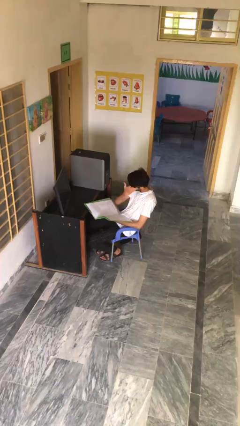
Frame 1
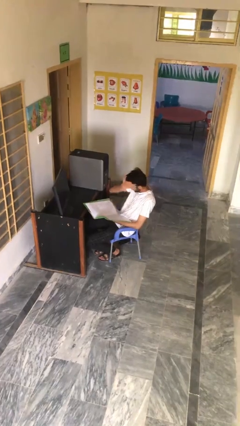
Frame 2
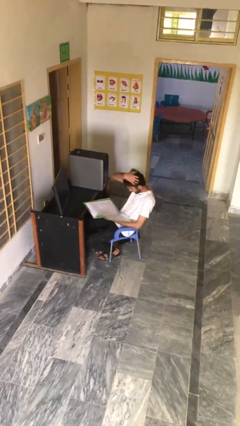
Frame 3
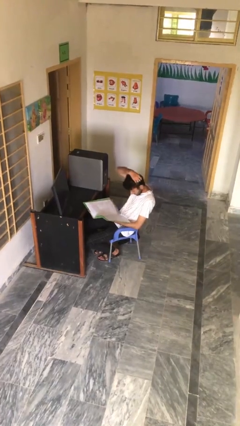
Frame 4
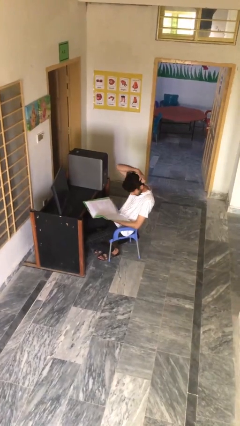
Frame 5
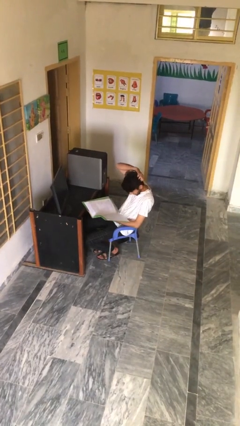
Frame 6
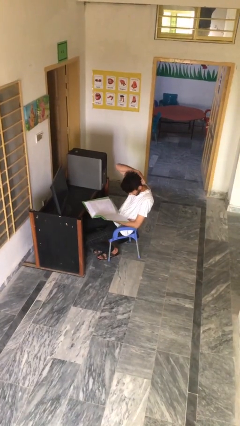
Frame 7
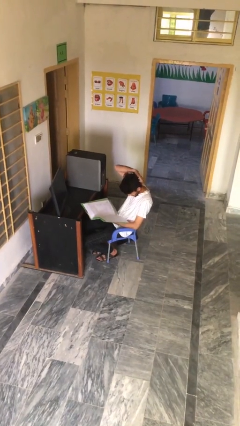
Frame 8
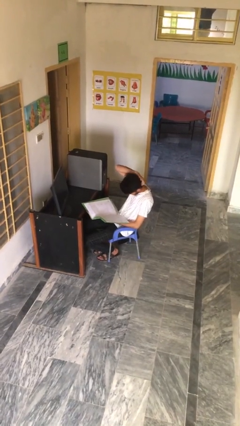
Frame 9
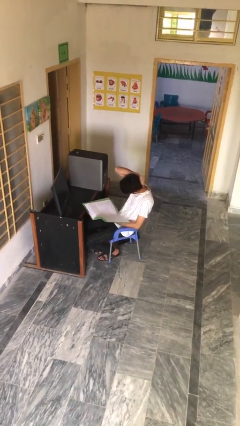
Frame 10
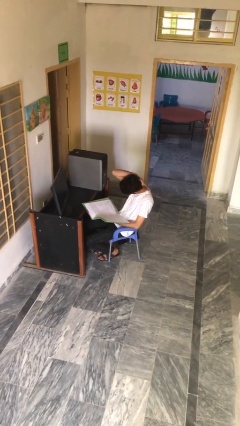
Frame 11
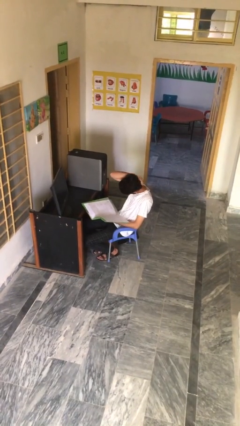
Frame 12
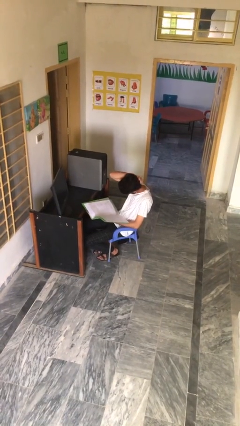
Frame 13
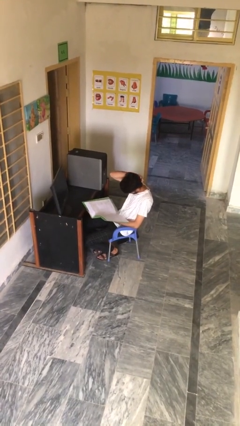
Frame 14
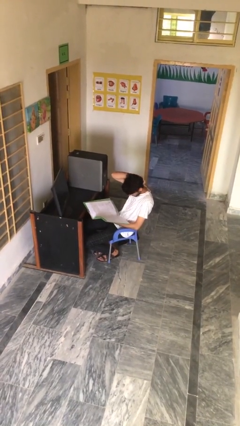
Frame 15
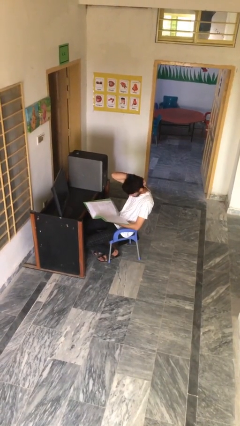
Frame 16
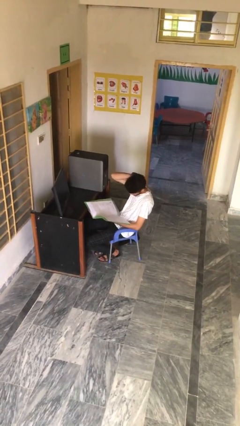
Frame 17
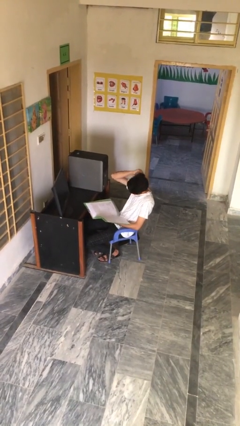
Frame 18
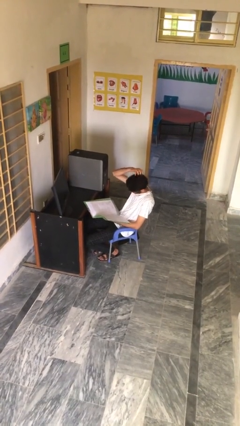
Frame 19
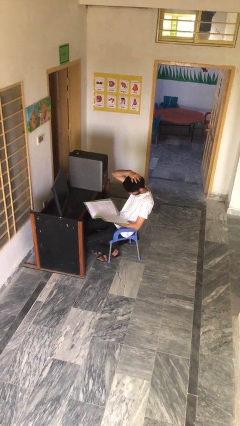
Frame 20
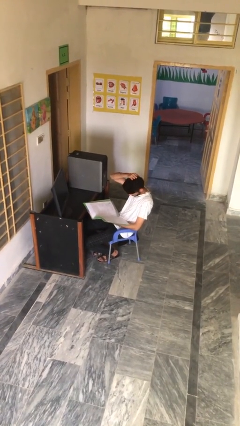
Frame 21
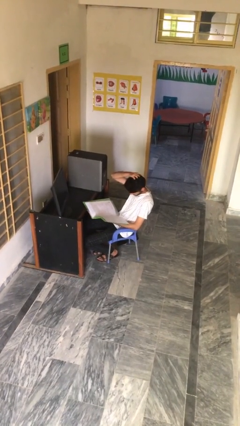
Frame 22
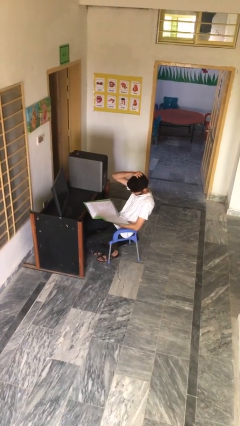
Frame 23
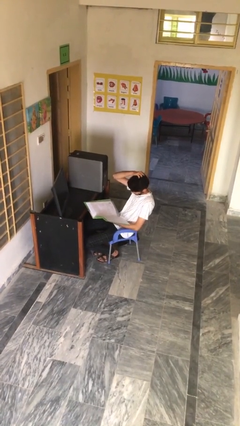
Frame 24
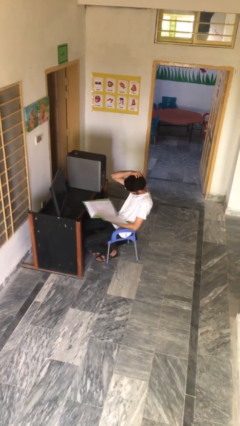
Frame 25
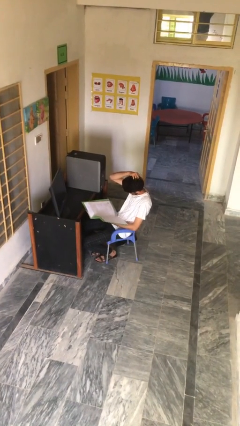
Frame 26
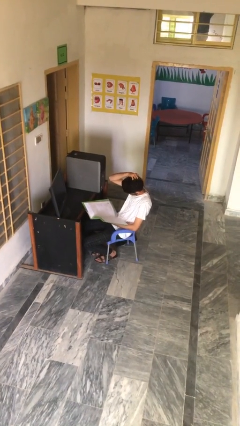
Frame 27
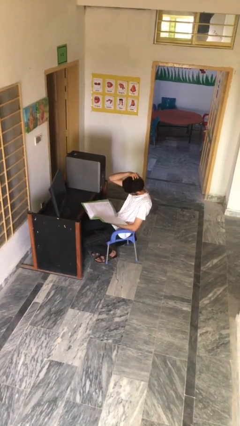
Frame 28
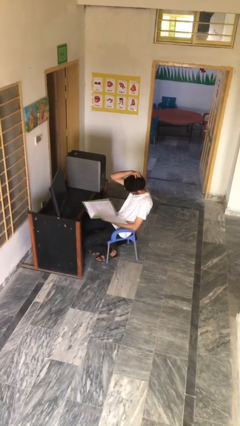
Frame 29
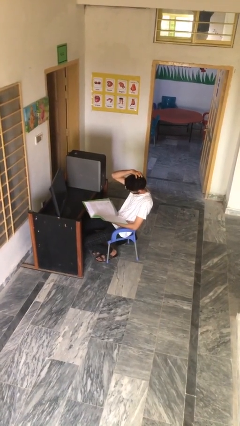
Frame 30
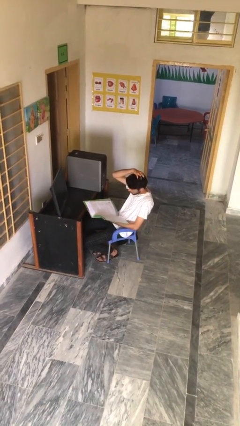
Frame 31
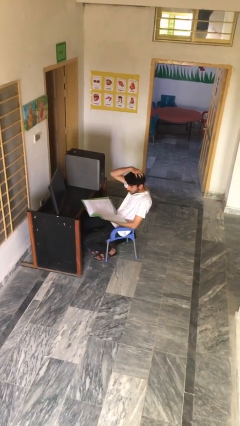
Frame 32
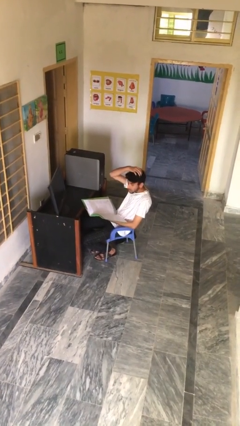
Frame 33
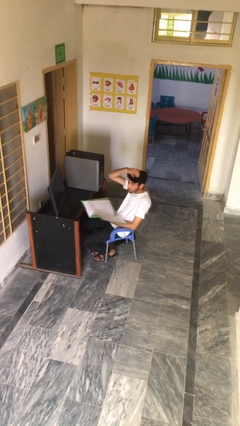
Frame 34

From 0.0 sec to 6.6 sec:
person reads document

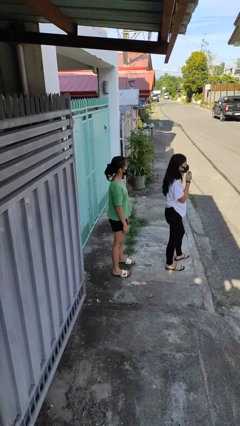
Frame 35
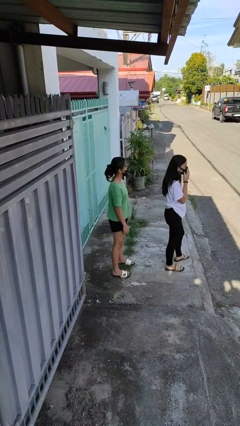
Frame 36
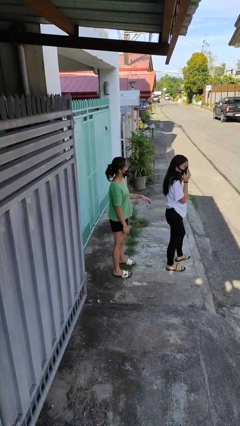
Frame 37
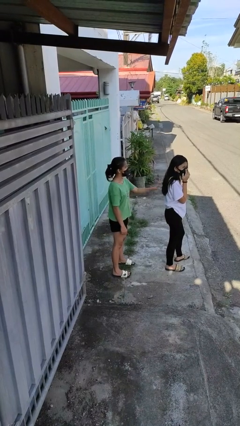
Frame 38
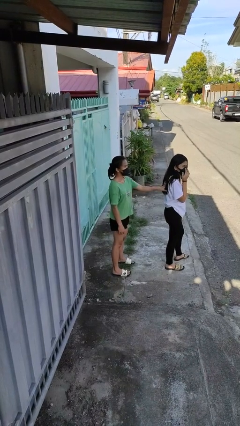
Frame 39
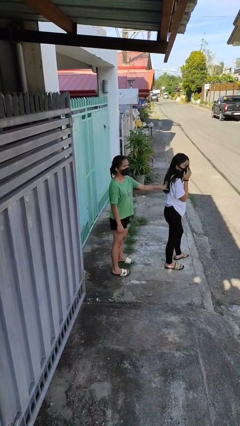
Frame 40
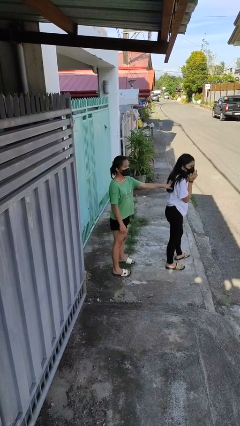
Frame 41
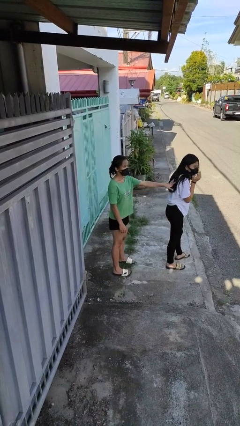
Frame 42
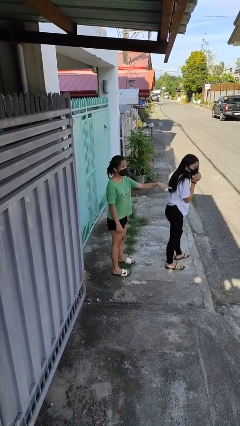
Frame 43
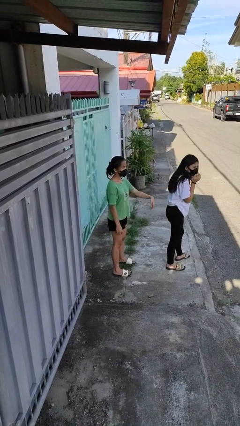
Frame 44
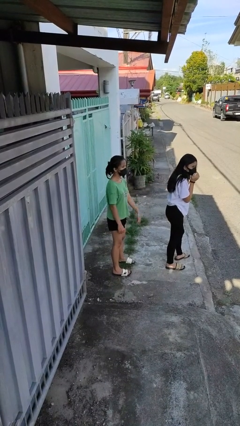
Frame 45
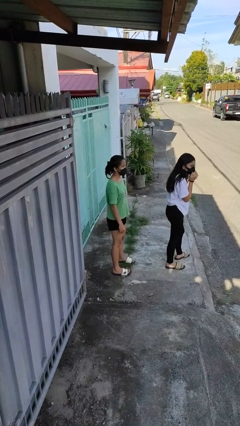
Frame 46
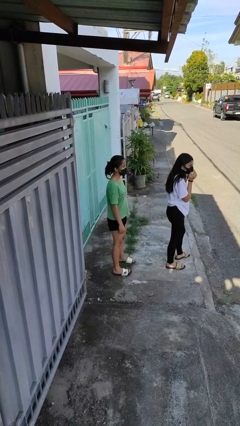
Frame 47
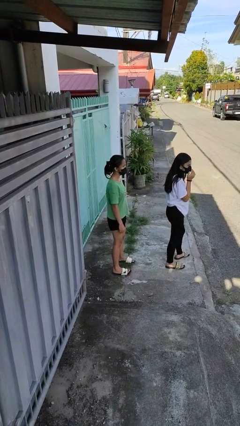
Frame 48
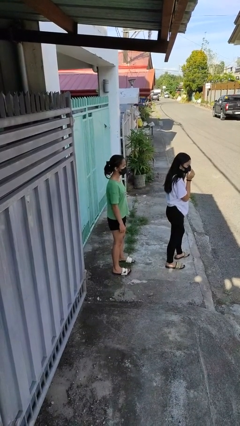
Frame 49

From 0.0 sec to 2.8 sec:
person touches back of person

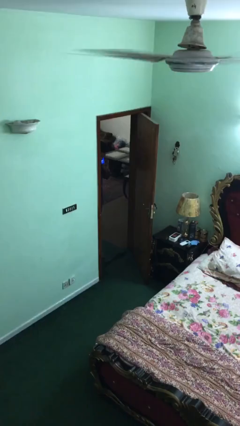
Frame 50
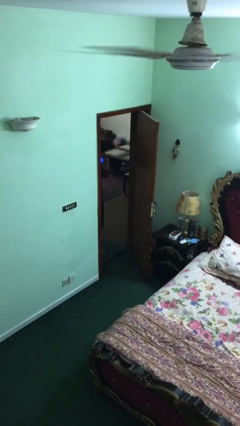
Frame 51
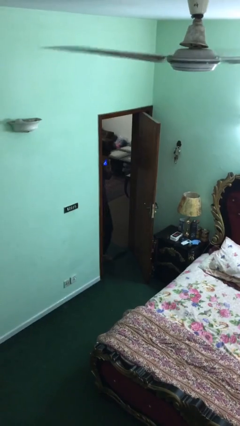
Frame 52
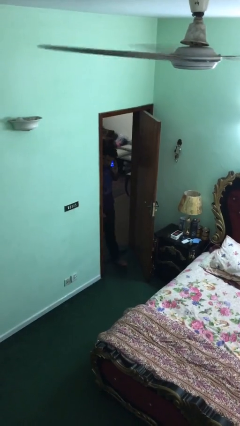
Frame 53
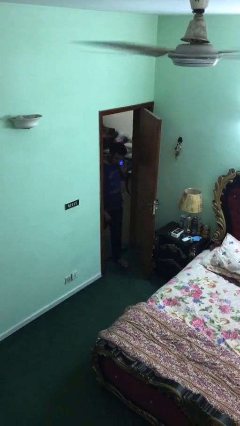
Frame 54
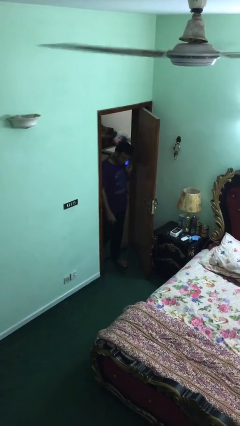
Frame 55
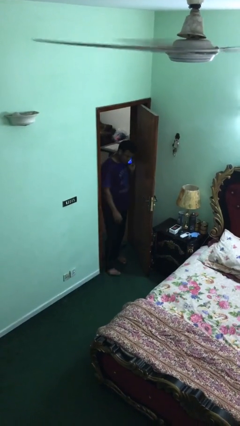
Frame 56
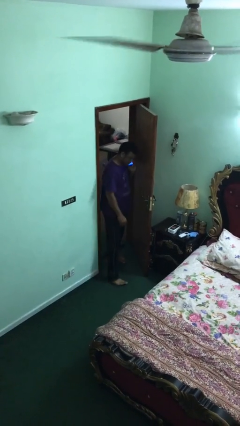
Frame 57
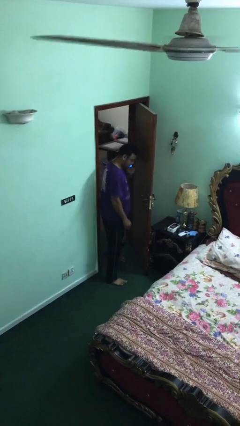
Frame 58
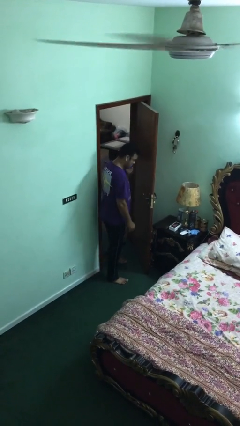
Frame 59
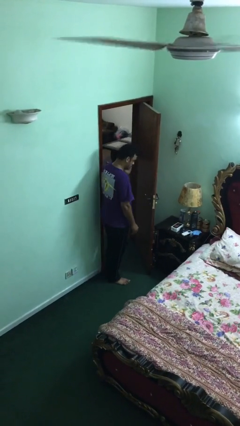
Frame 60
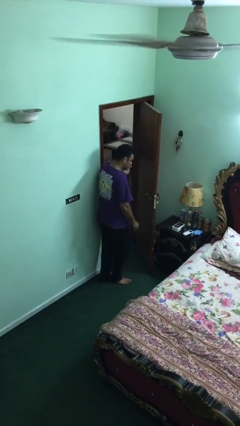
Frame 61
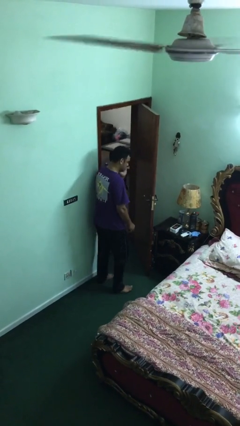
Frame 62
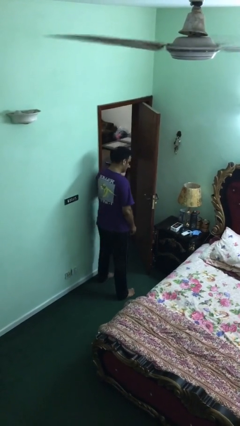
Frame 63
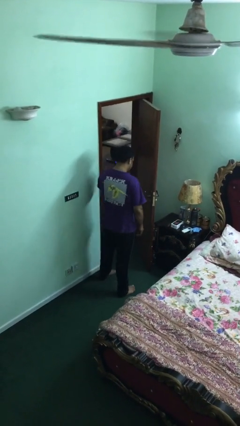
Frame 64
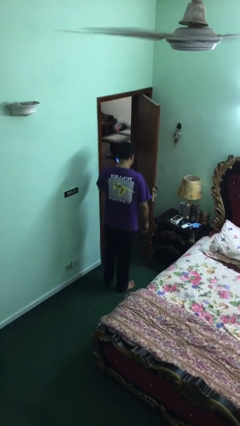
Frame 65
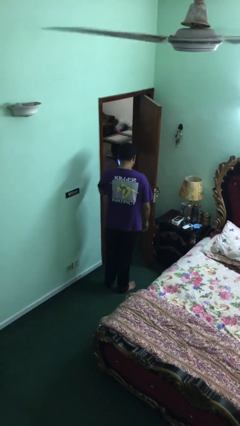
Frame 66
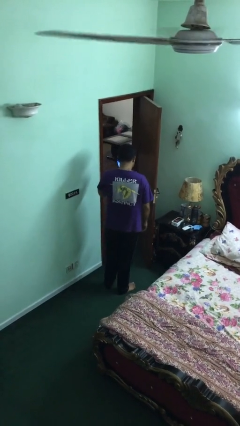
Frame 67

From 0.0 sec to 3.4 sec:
person enters scene through structure

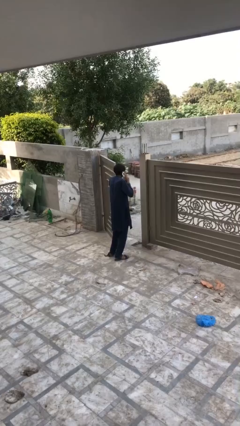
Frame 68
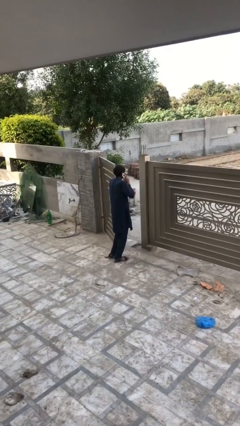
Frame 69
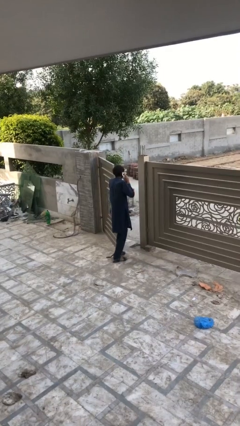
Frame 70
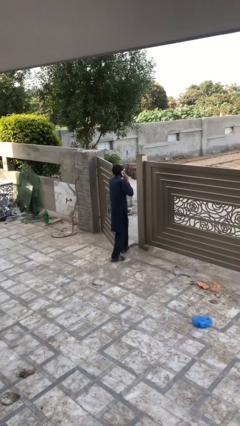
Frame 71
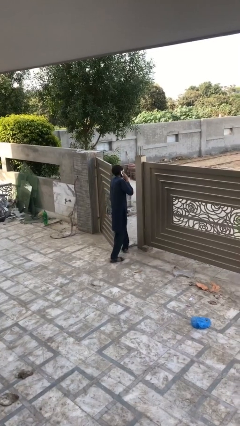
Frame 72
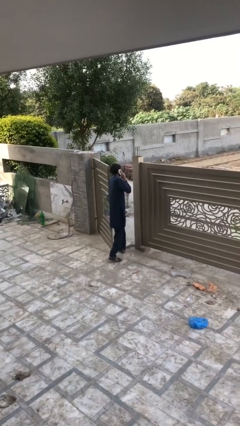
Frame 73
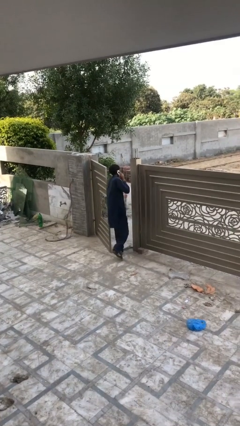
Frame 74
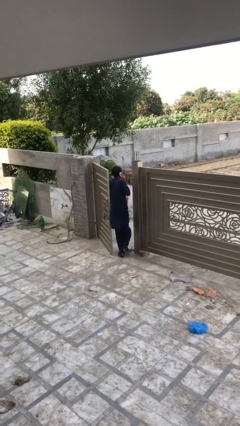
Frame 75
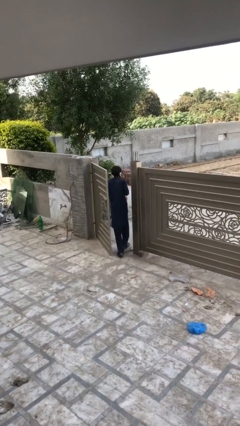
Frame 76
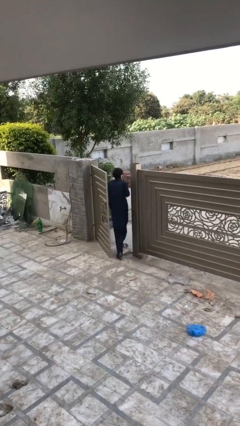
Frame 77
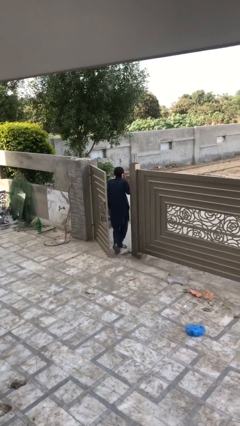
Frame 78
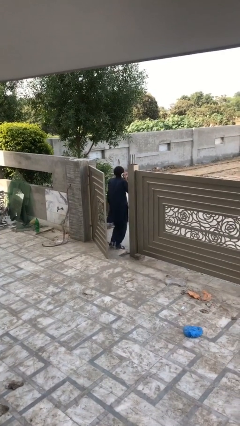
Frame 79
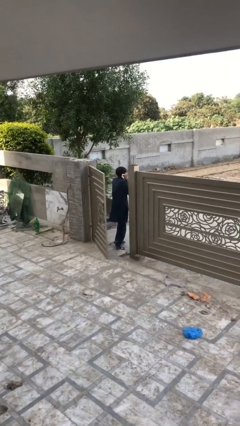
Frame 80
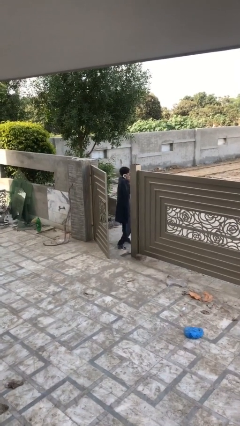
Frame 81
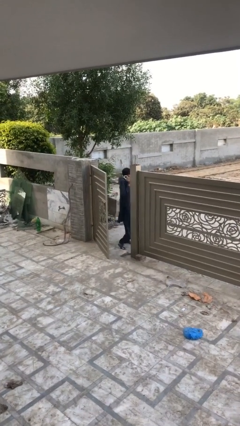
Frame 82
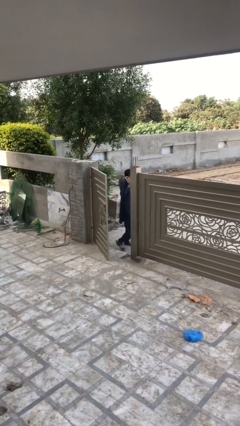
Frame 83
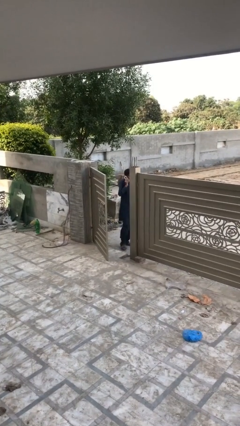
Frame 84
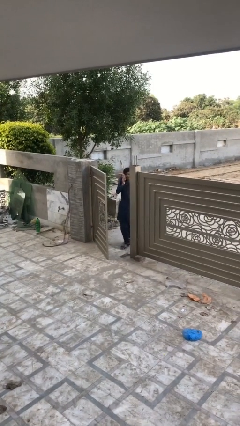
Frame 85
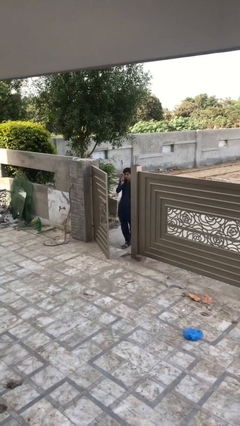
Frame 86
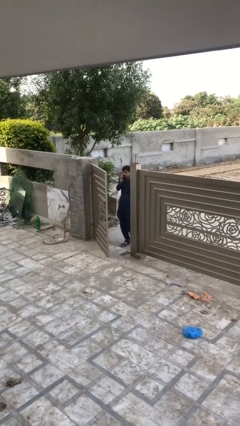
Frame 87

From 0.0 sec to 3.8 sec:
person exits scene through structure

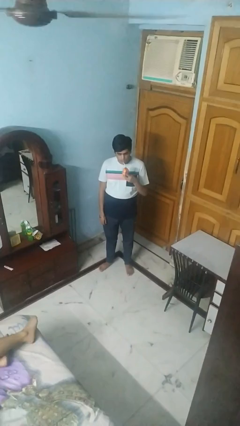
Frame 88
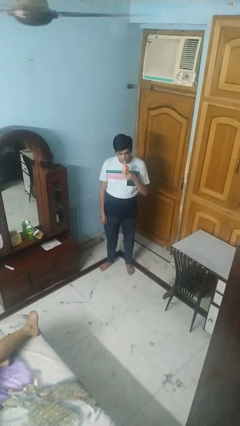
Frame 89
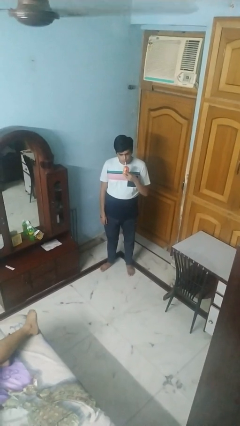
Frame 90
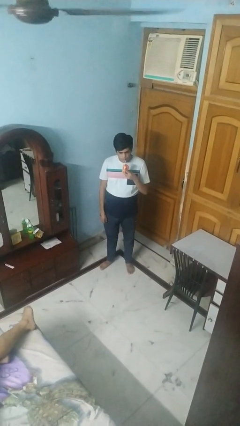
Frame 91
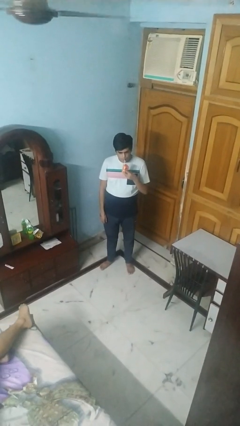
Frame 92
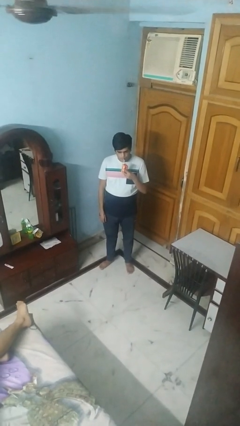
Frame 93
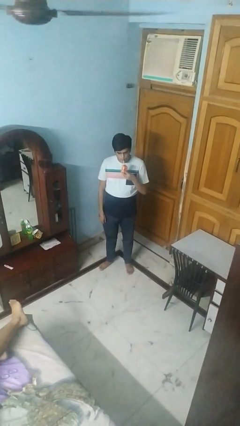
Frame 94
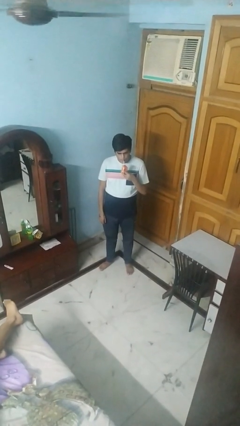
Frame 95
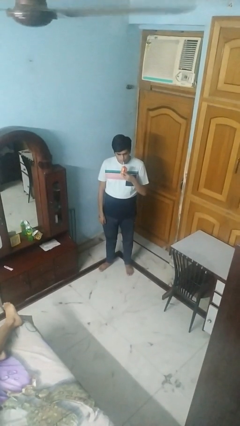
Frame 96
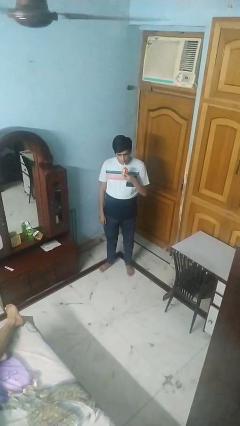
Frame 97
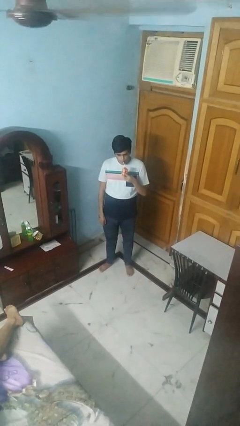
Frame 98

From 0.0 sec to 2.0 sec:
person drinks from straw
